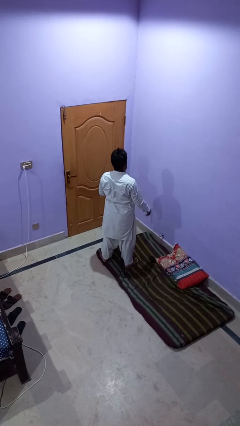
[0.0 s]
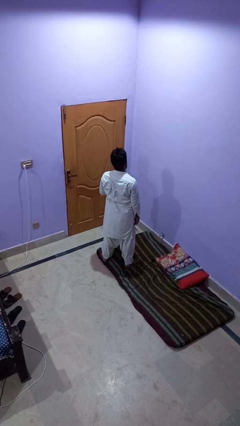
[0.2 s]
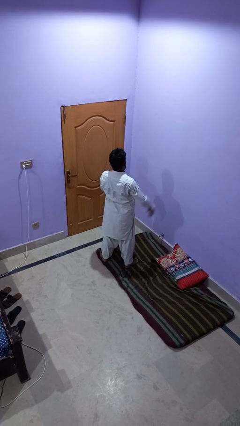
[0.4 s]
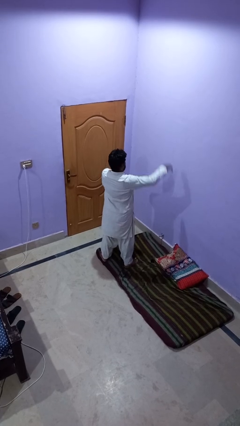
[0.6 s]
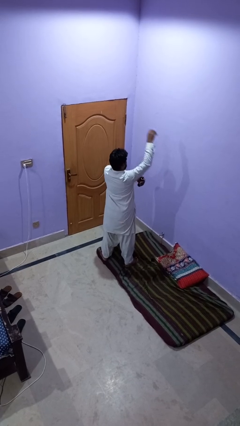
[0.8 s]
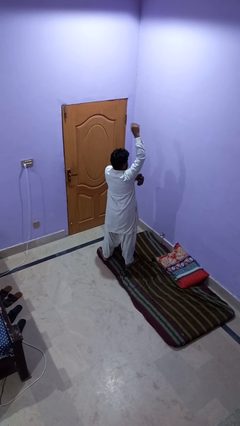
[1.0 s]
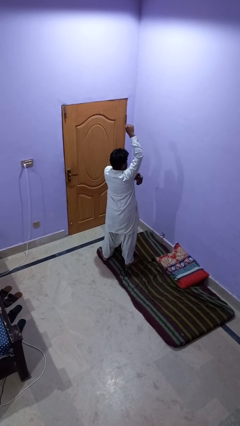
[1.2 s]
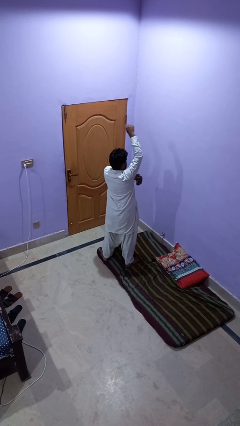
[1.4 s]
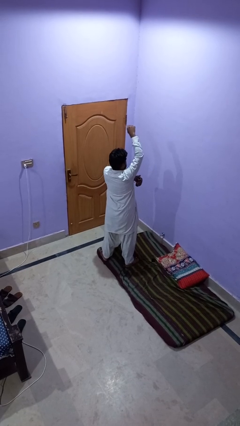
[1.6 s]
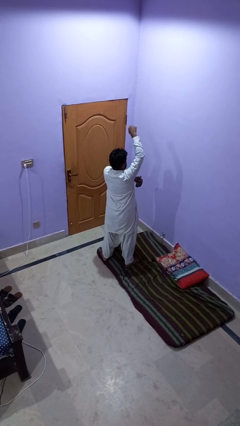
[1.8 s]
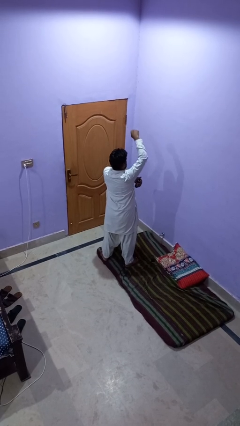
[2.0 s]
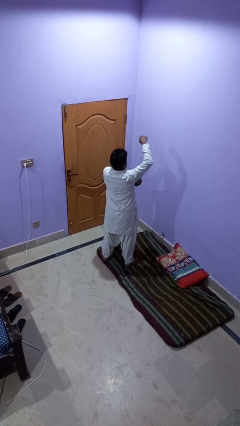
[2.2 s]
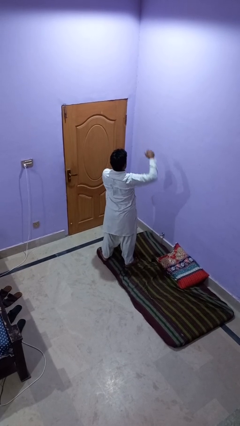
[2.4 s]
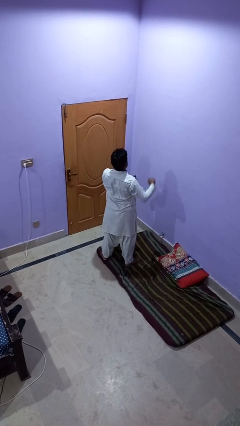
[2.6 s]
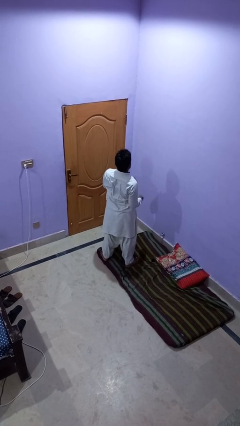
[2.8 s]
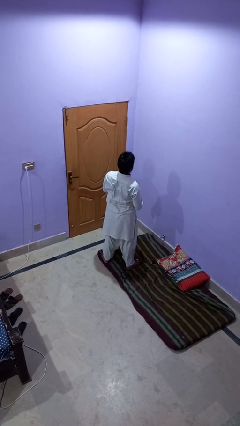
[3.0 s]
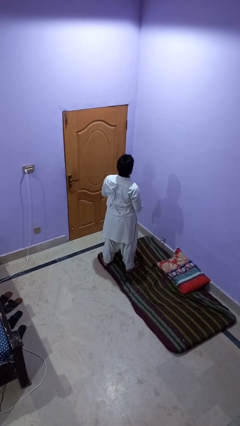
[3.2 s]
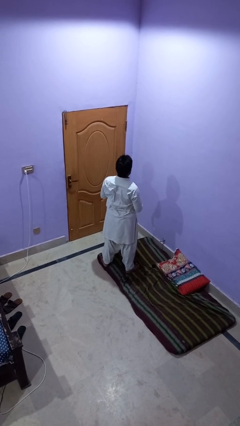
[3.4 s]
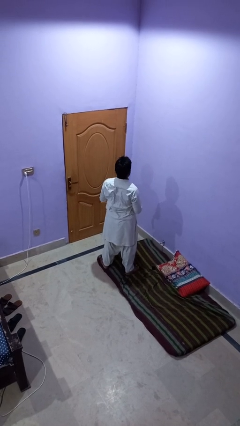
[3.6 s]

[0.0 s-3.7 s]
person applies deodorant

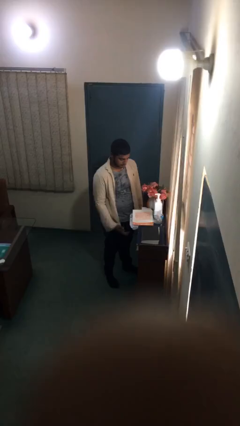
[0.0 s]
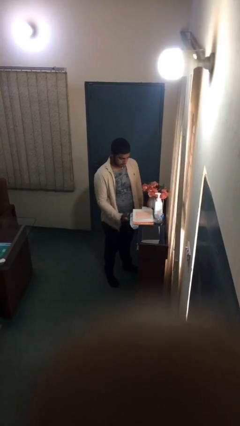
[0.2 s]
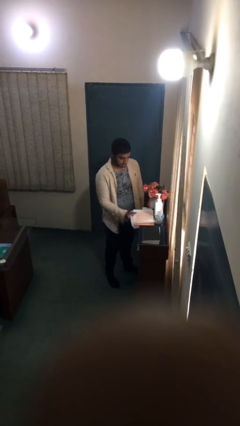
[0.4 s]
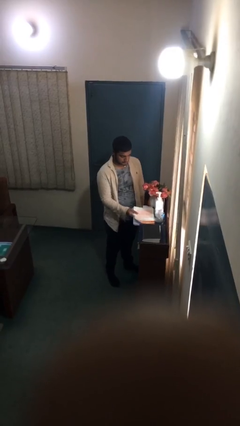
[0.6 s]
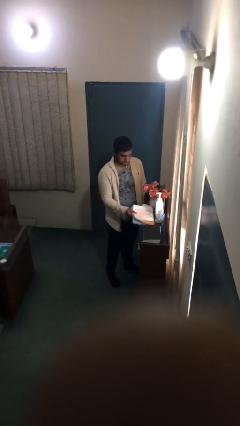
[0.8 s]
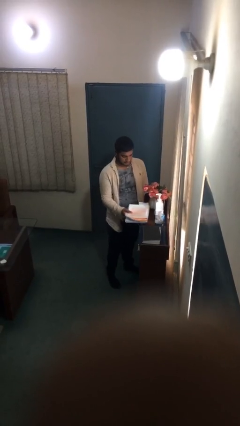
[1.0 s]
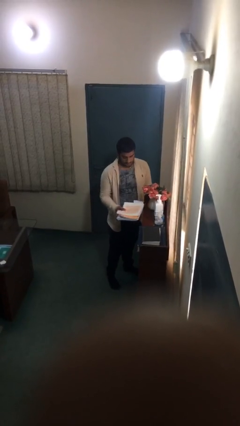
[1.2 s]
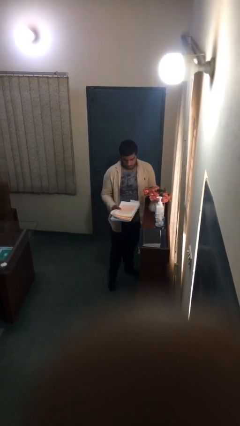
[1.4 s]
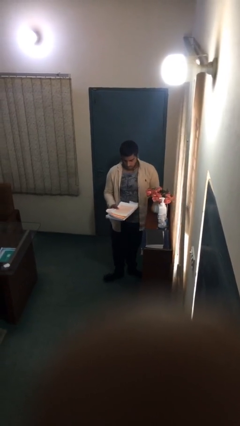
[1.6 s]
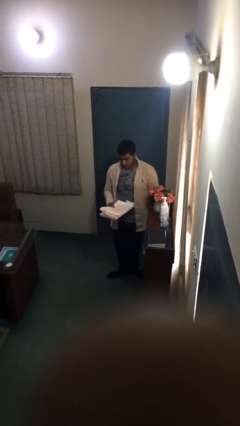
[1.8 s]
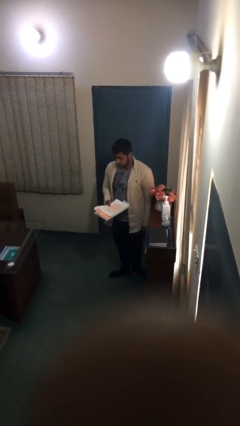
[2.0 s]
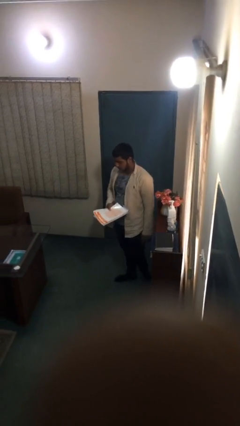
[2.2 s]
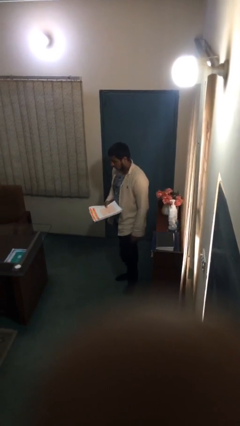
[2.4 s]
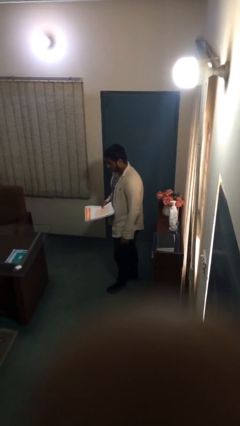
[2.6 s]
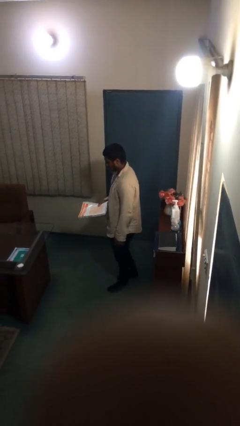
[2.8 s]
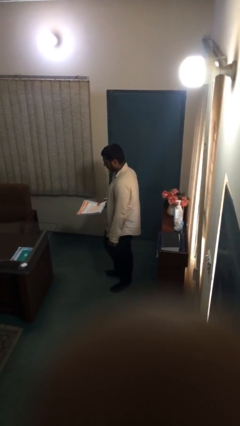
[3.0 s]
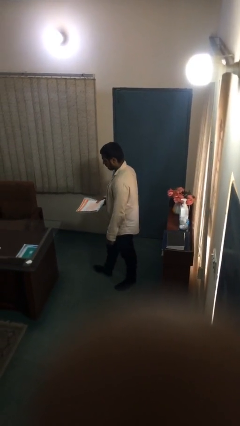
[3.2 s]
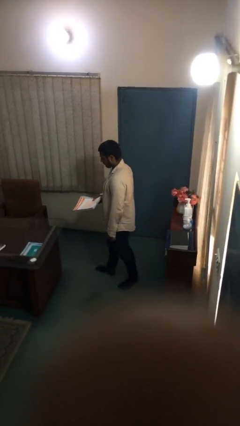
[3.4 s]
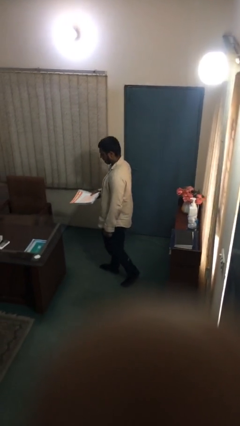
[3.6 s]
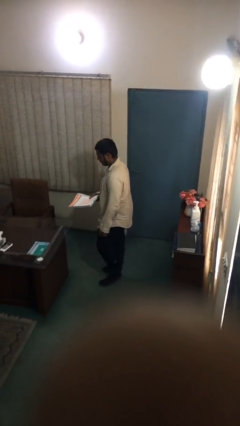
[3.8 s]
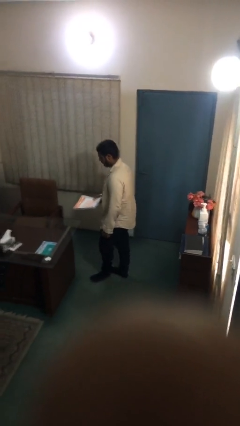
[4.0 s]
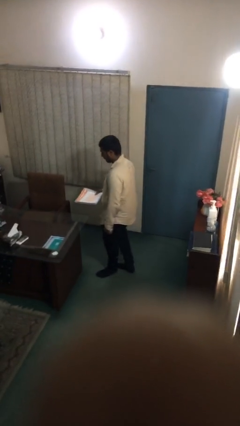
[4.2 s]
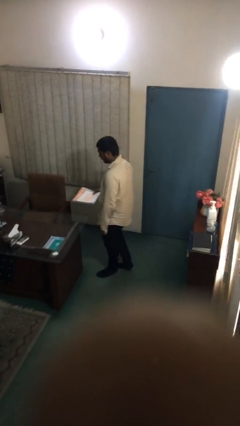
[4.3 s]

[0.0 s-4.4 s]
person picks up object from shelf

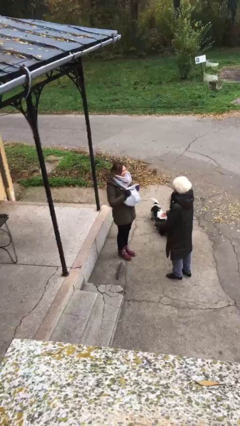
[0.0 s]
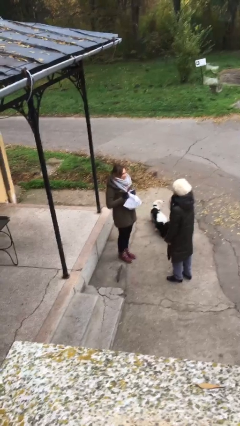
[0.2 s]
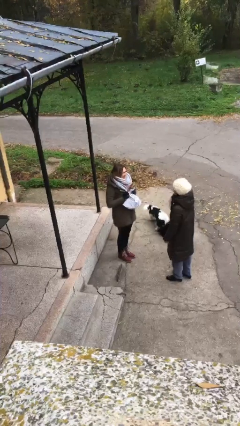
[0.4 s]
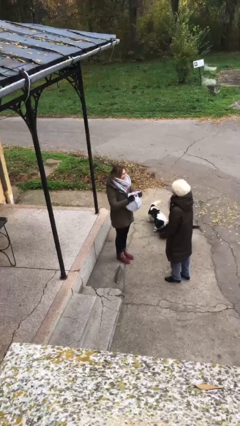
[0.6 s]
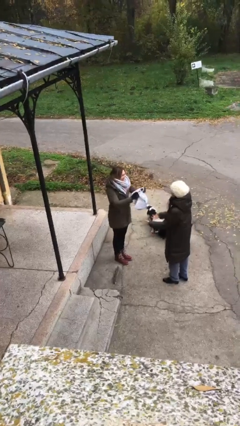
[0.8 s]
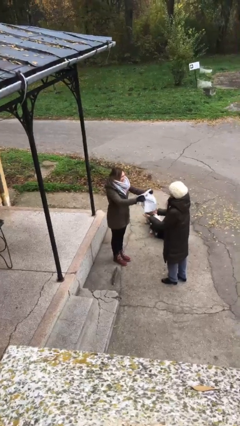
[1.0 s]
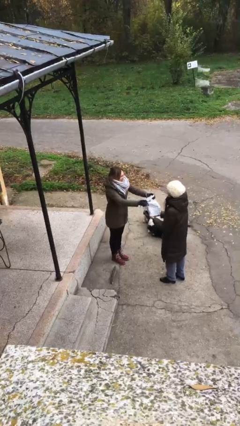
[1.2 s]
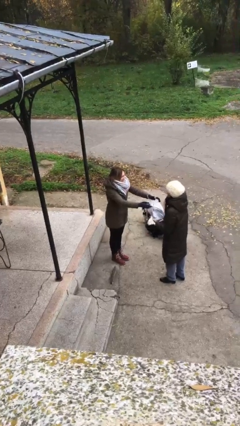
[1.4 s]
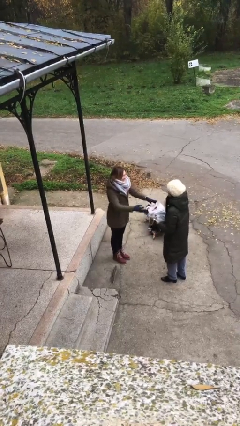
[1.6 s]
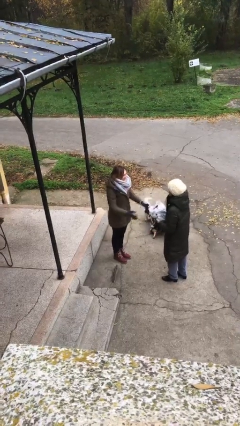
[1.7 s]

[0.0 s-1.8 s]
person transfers object to person

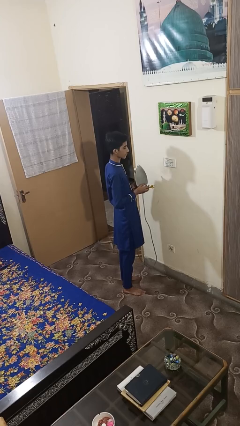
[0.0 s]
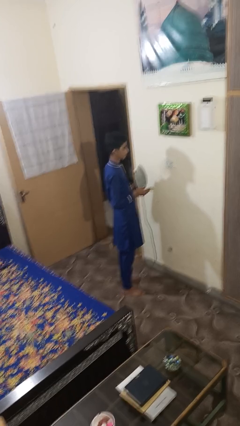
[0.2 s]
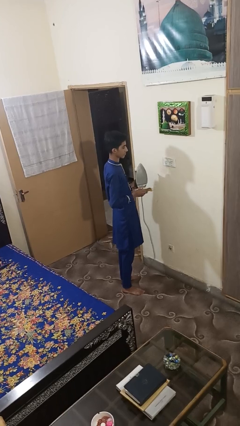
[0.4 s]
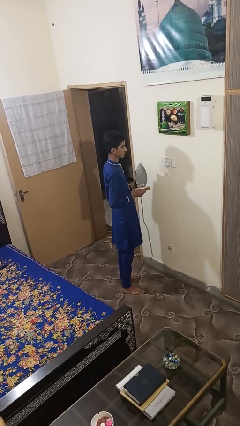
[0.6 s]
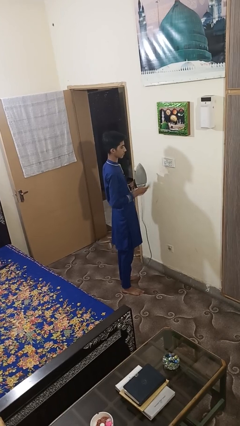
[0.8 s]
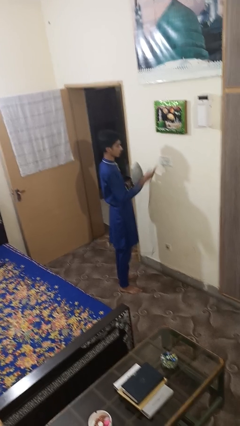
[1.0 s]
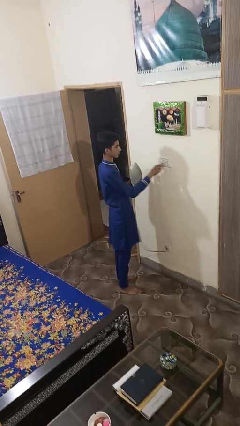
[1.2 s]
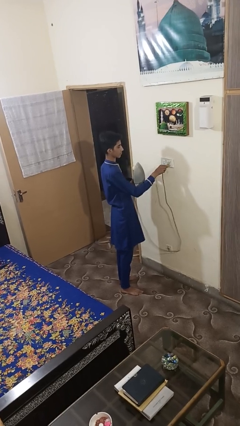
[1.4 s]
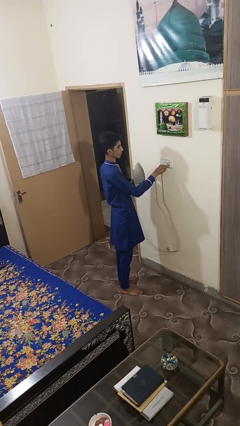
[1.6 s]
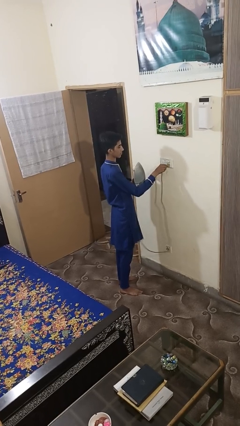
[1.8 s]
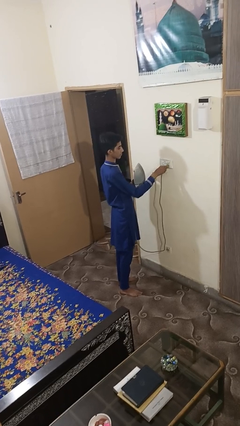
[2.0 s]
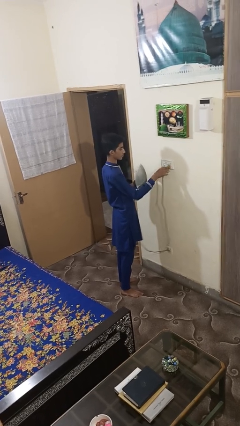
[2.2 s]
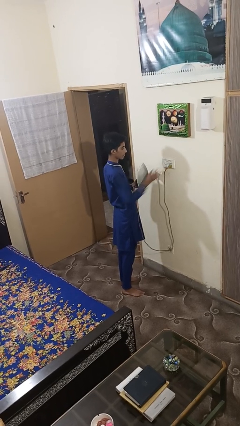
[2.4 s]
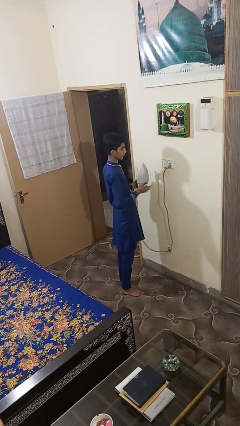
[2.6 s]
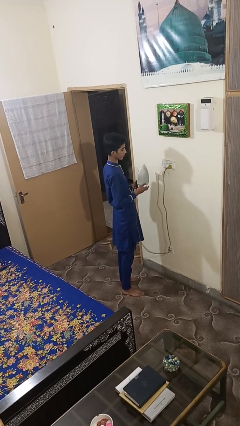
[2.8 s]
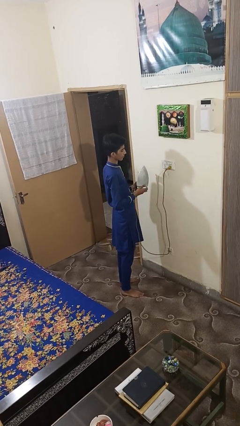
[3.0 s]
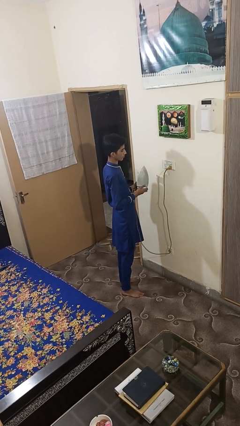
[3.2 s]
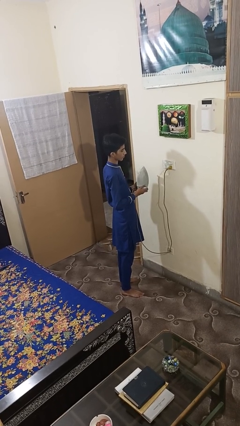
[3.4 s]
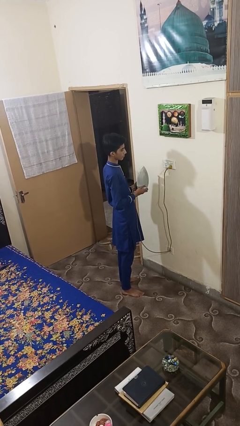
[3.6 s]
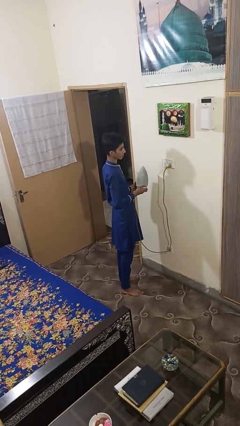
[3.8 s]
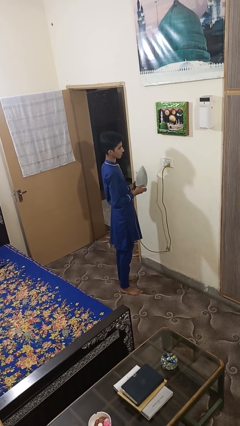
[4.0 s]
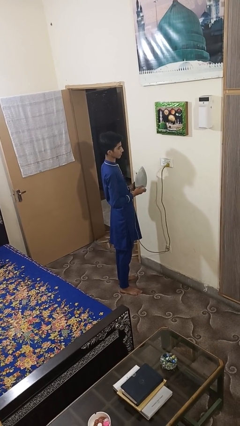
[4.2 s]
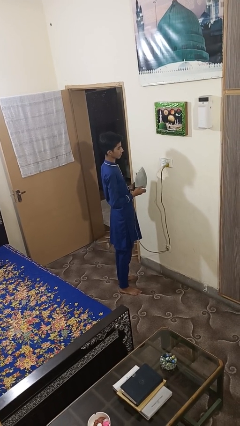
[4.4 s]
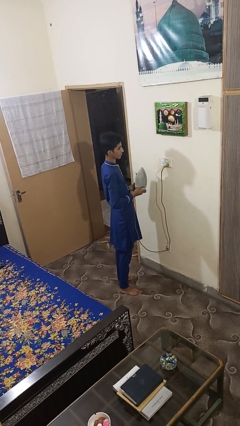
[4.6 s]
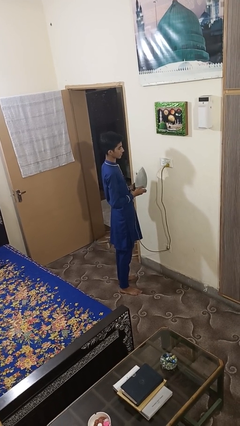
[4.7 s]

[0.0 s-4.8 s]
person plugs into electrical socket

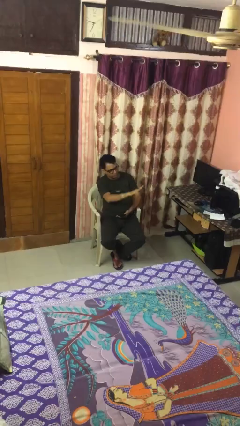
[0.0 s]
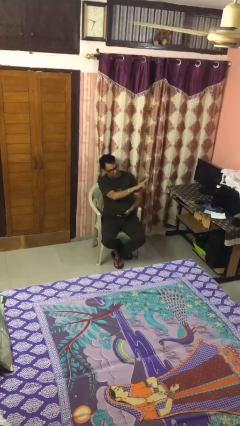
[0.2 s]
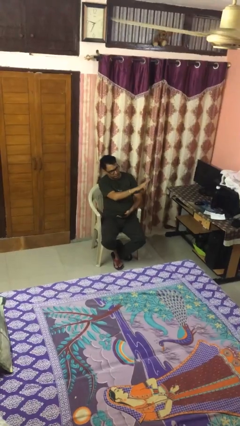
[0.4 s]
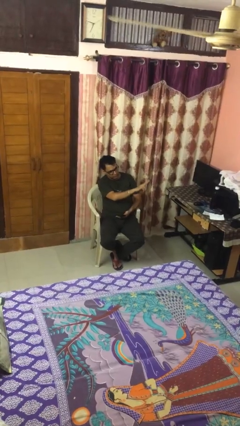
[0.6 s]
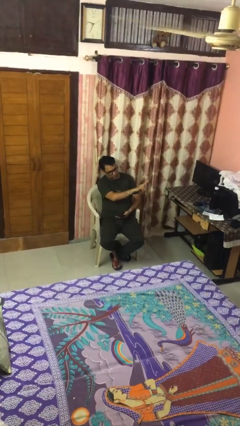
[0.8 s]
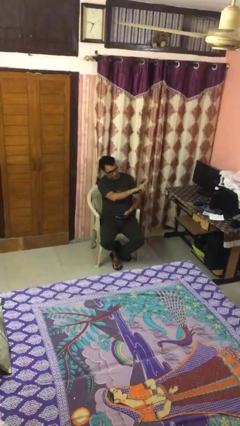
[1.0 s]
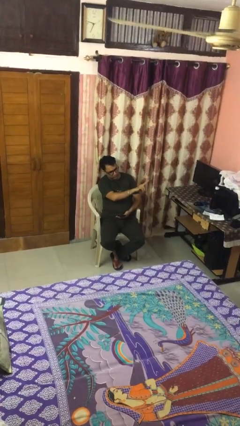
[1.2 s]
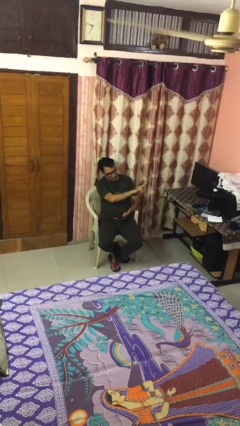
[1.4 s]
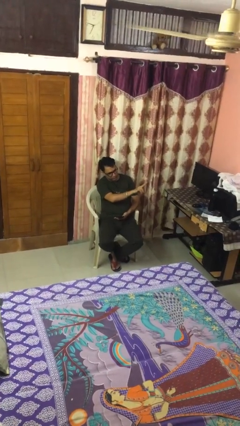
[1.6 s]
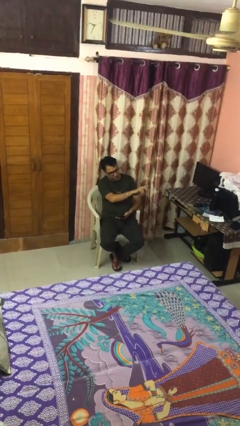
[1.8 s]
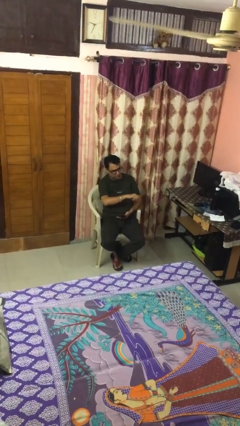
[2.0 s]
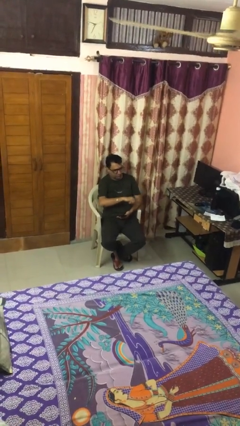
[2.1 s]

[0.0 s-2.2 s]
person gestures peace

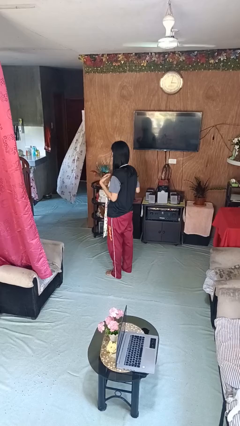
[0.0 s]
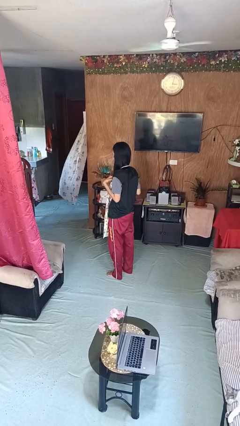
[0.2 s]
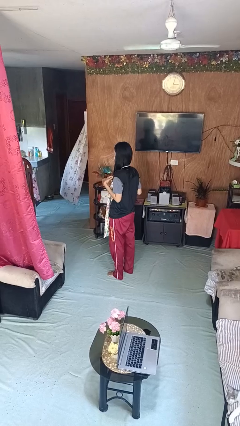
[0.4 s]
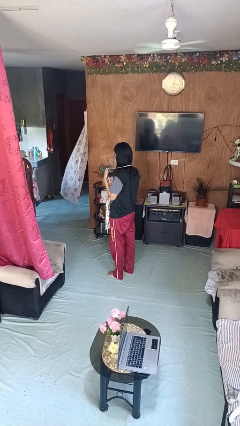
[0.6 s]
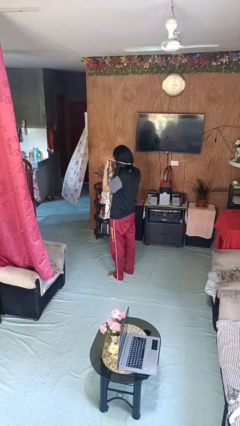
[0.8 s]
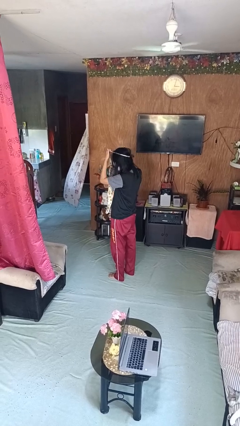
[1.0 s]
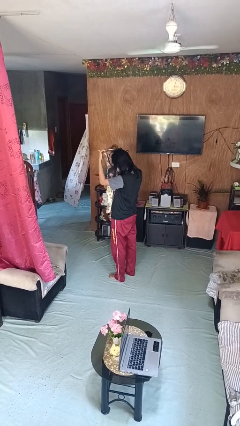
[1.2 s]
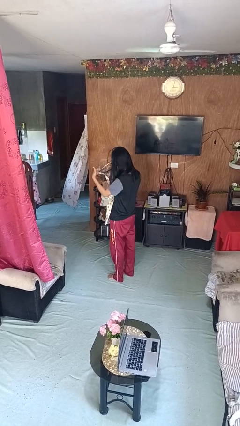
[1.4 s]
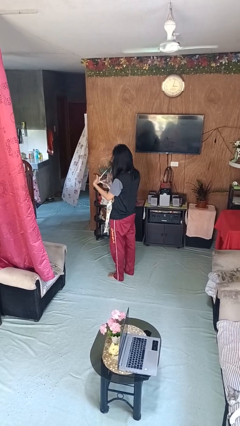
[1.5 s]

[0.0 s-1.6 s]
person takes off apron
